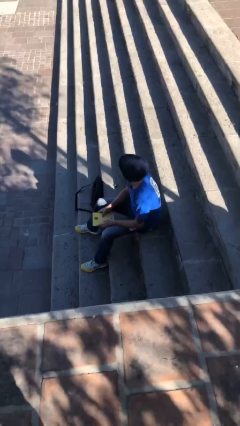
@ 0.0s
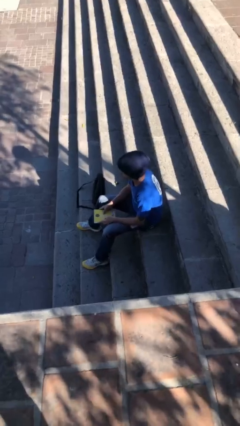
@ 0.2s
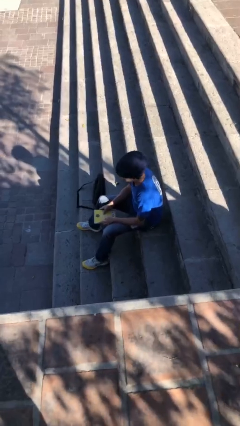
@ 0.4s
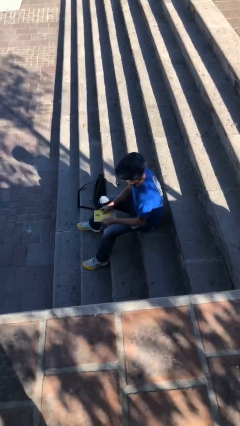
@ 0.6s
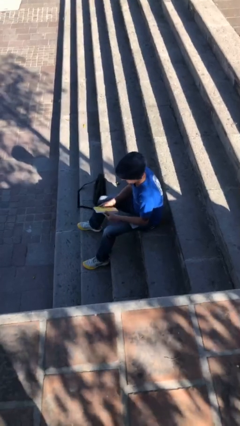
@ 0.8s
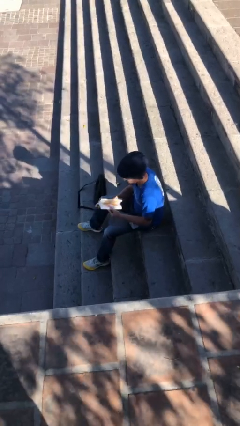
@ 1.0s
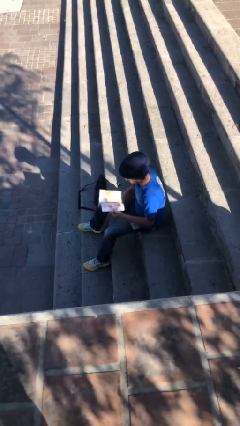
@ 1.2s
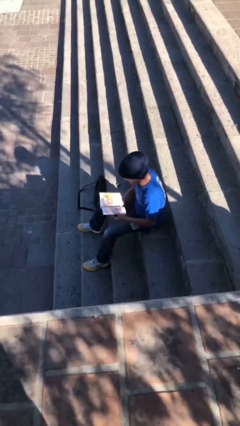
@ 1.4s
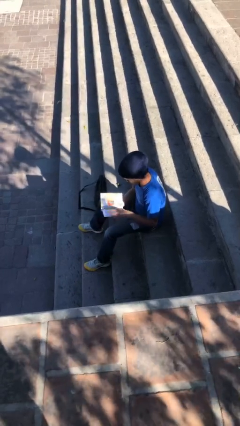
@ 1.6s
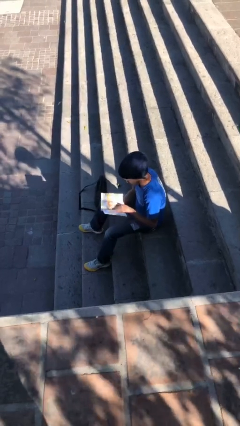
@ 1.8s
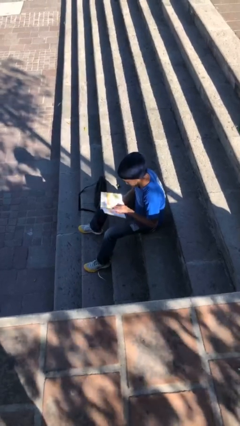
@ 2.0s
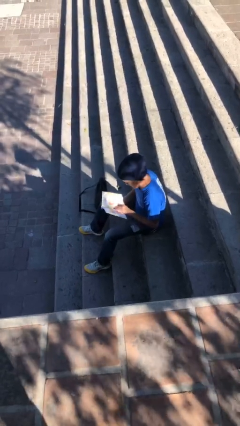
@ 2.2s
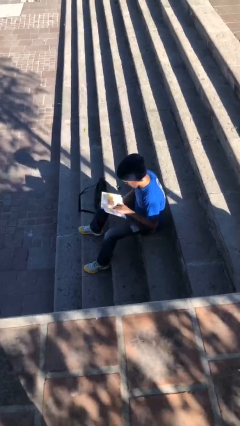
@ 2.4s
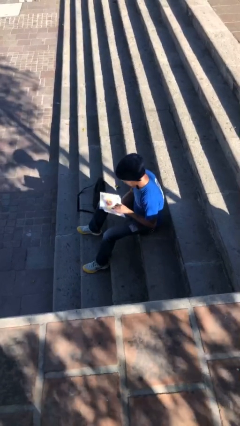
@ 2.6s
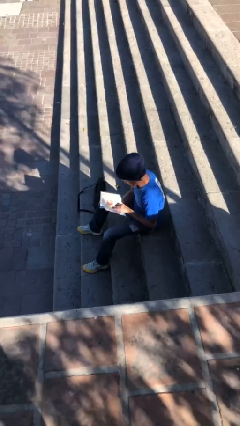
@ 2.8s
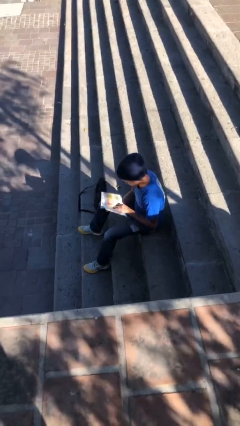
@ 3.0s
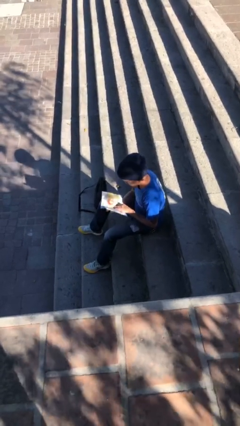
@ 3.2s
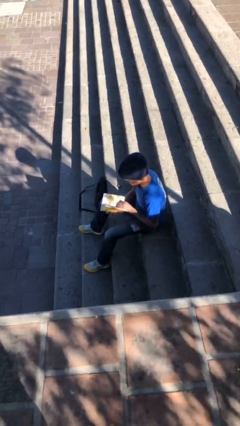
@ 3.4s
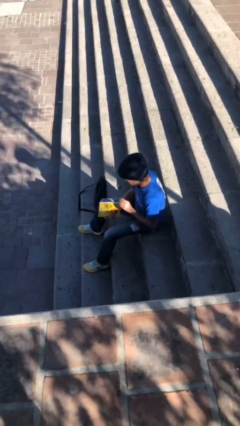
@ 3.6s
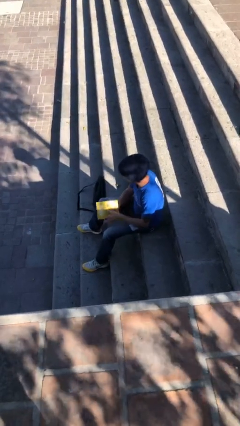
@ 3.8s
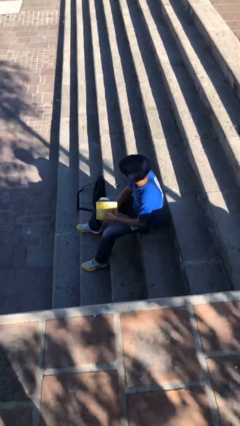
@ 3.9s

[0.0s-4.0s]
person reads document

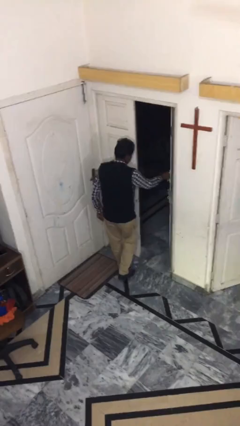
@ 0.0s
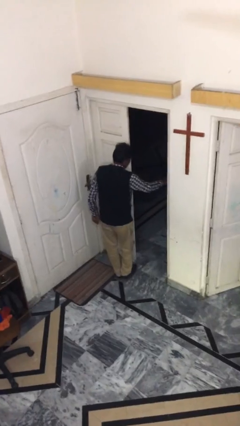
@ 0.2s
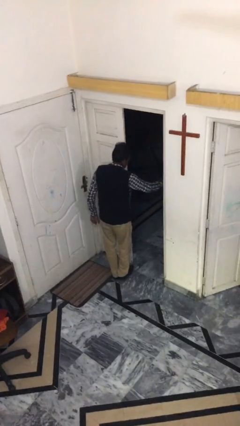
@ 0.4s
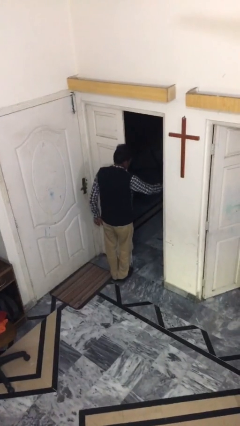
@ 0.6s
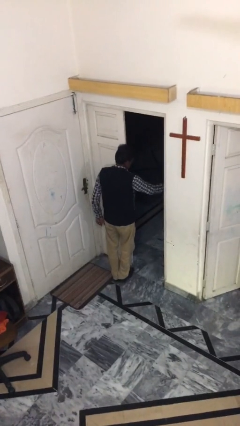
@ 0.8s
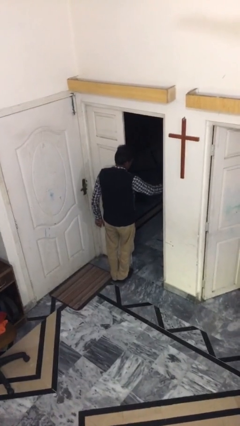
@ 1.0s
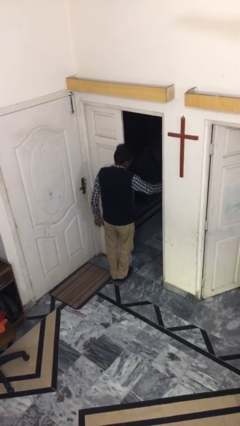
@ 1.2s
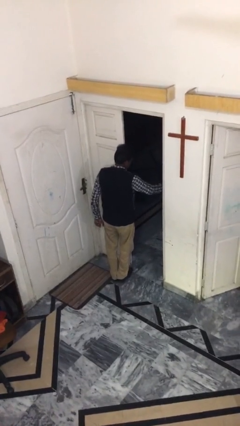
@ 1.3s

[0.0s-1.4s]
person opens facility door

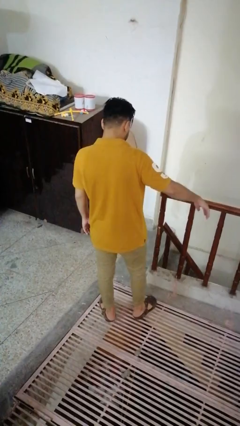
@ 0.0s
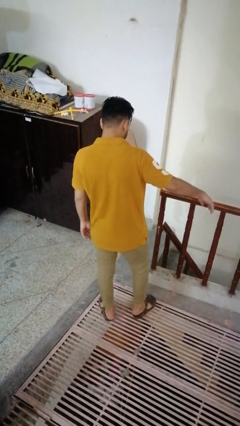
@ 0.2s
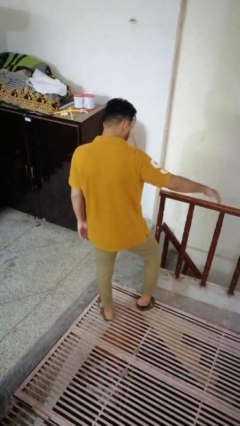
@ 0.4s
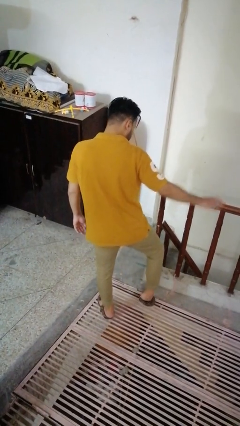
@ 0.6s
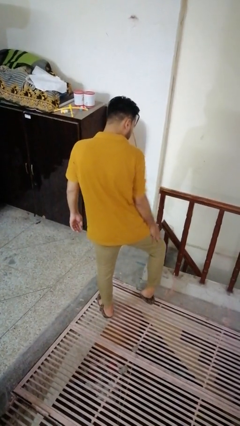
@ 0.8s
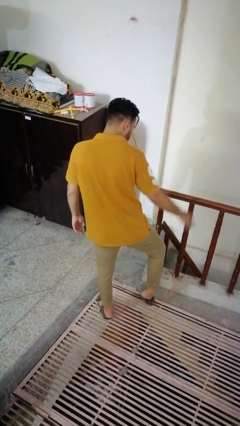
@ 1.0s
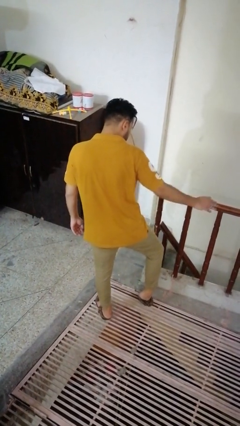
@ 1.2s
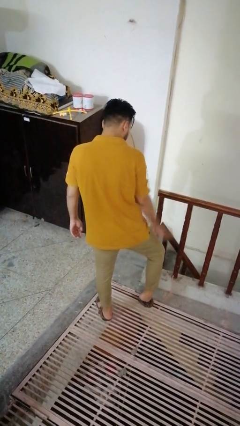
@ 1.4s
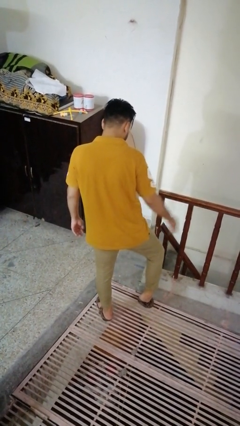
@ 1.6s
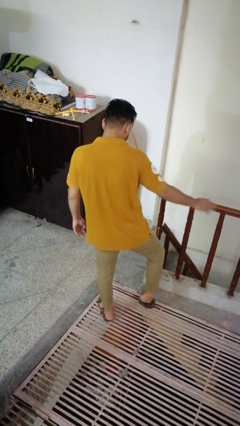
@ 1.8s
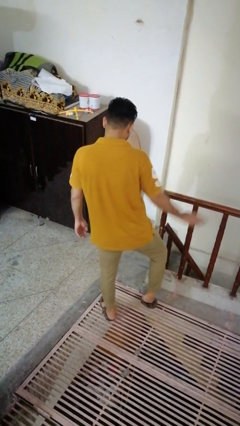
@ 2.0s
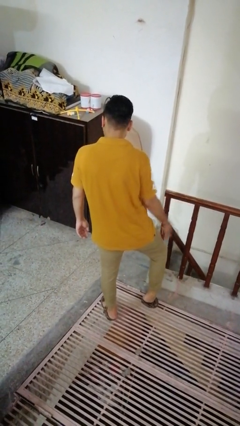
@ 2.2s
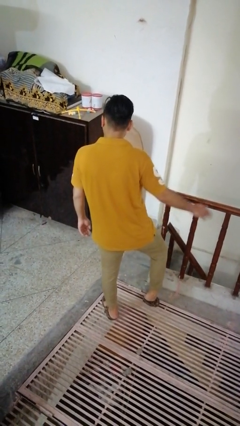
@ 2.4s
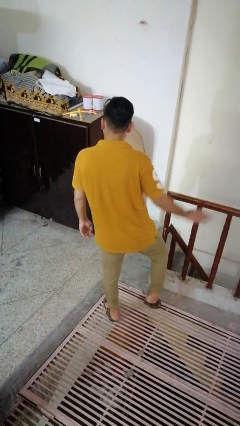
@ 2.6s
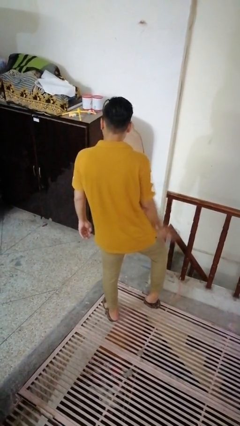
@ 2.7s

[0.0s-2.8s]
person slaps hands on thighs

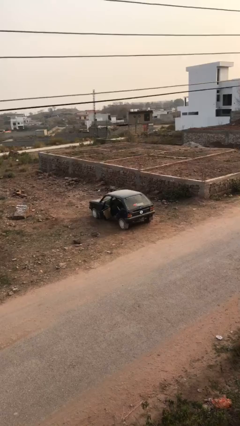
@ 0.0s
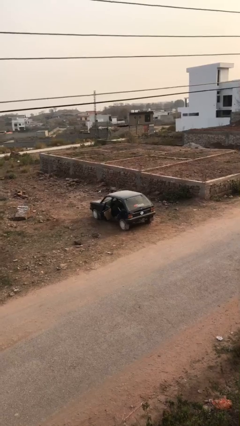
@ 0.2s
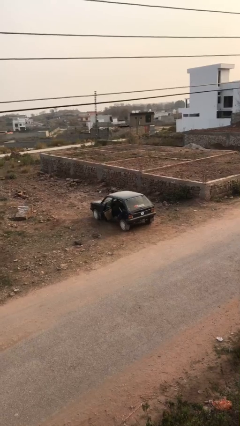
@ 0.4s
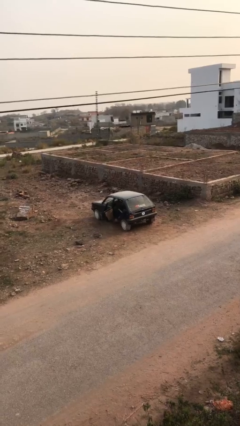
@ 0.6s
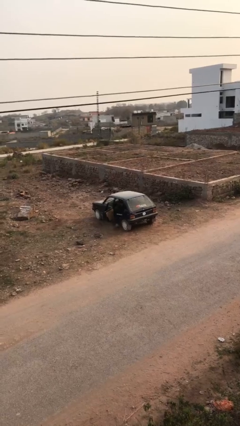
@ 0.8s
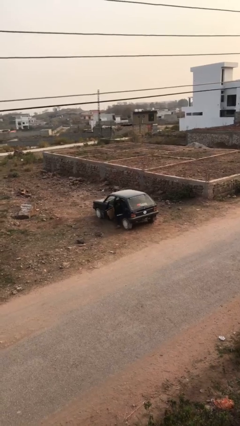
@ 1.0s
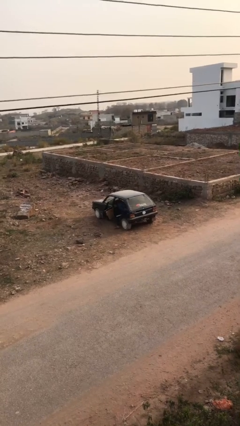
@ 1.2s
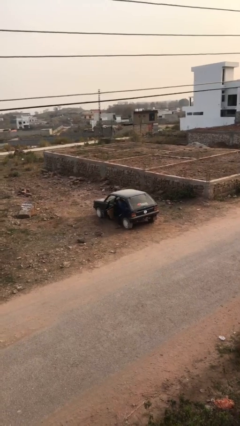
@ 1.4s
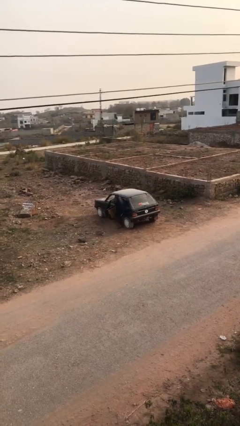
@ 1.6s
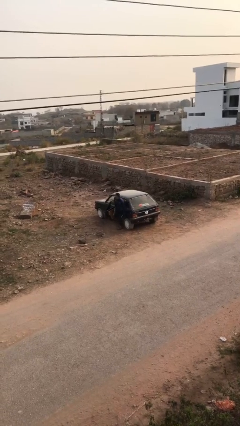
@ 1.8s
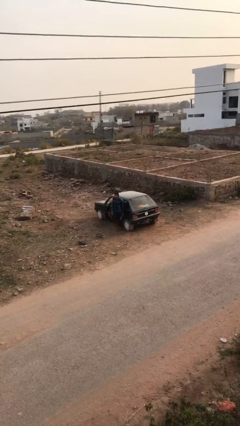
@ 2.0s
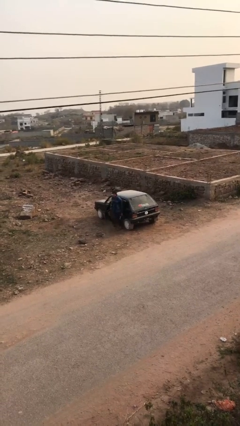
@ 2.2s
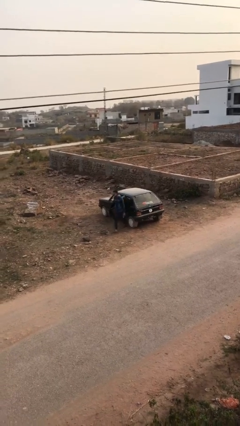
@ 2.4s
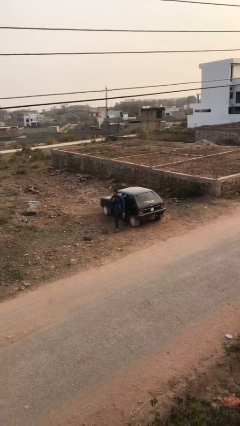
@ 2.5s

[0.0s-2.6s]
person exits car

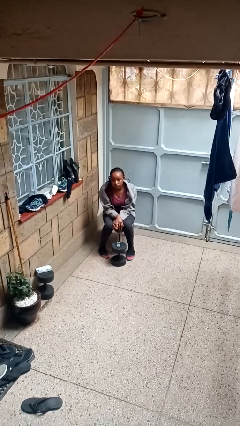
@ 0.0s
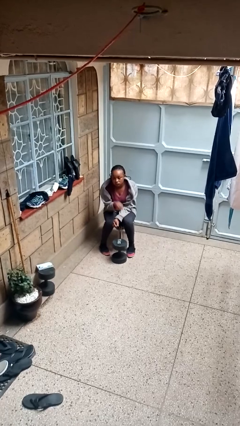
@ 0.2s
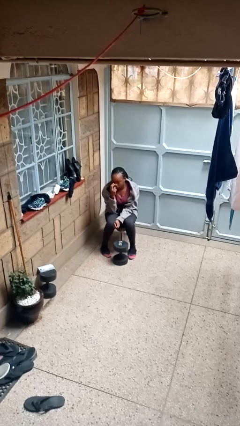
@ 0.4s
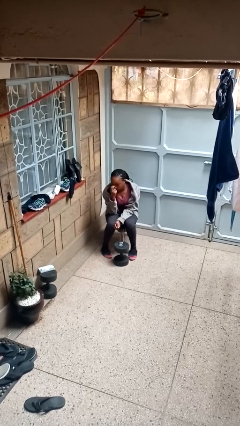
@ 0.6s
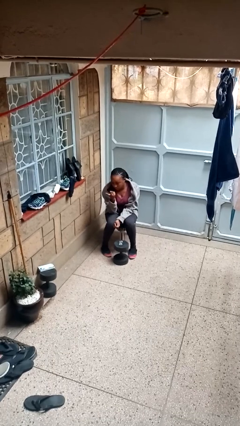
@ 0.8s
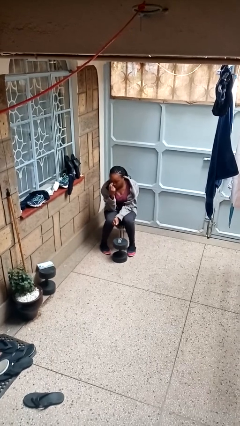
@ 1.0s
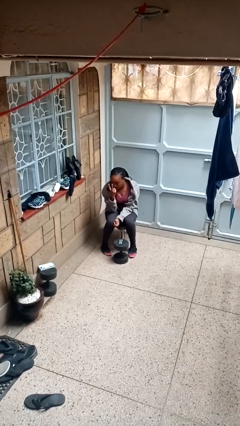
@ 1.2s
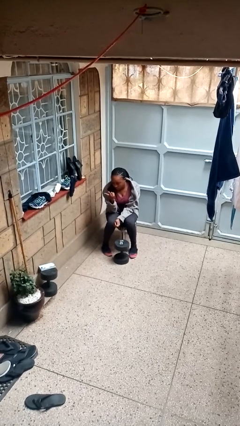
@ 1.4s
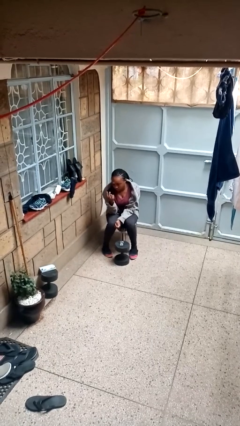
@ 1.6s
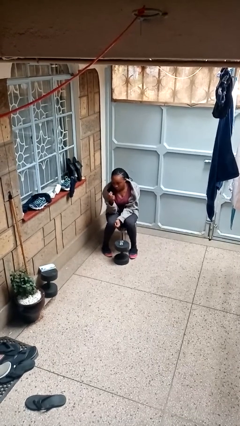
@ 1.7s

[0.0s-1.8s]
person gestures watch closely

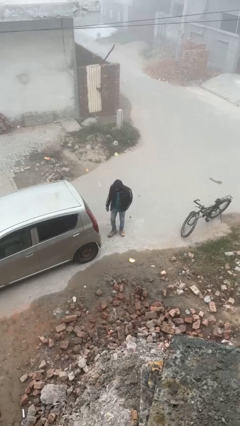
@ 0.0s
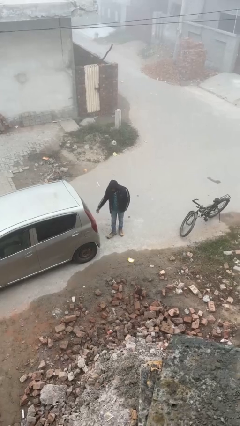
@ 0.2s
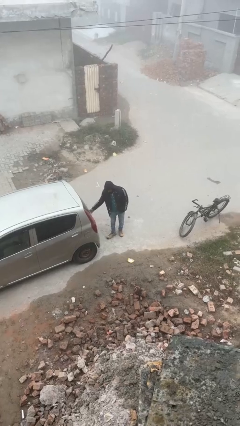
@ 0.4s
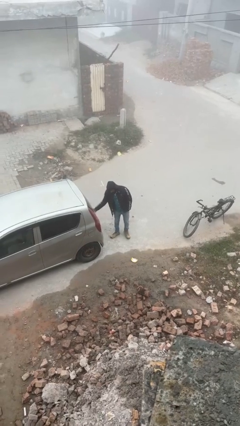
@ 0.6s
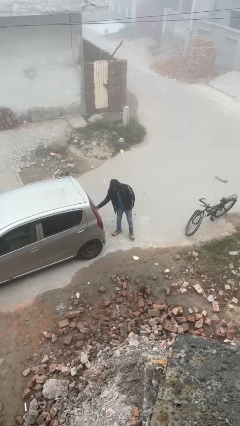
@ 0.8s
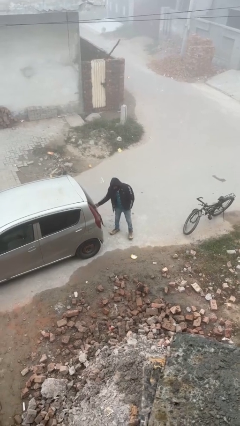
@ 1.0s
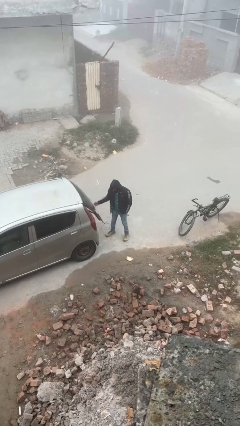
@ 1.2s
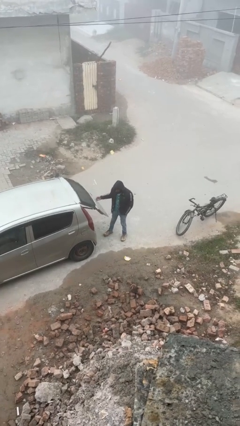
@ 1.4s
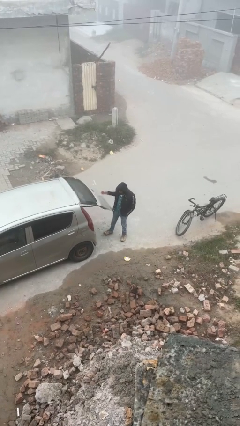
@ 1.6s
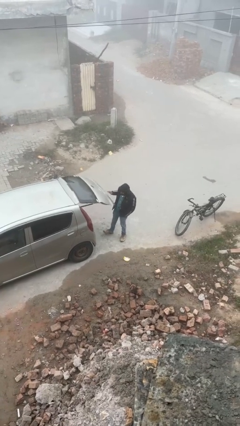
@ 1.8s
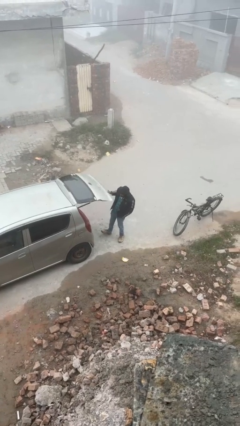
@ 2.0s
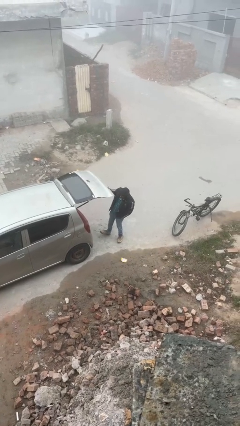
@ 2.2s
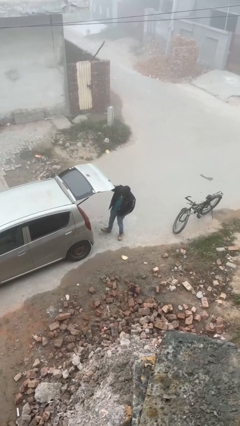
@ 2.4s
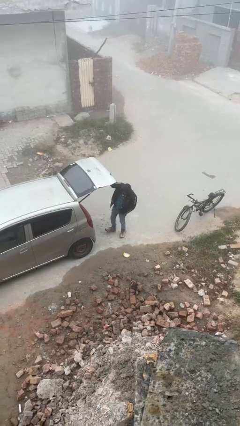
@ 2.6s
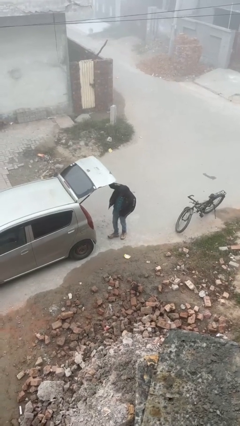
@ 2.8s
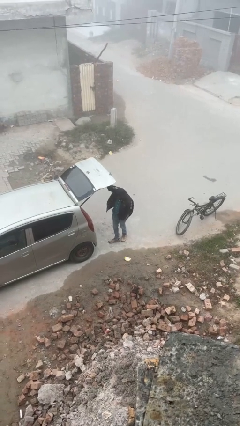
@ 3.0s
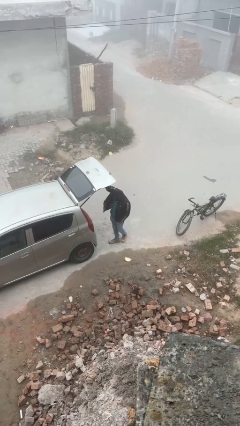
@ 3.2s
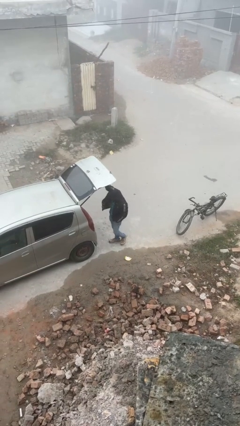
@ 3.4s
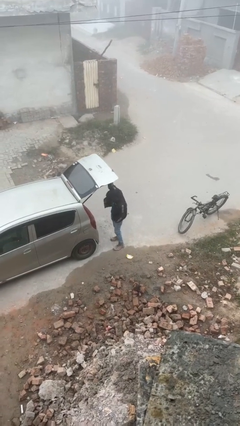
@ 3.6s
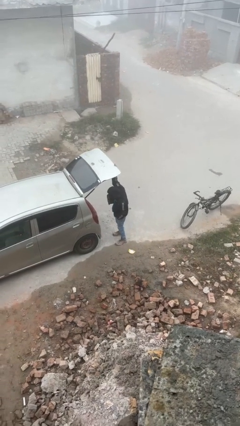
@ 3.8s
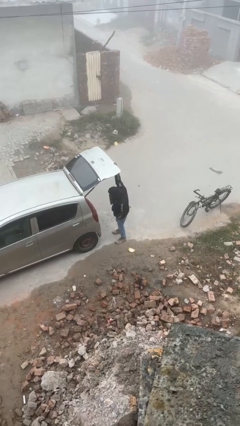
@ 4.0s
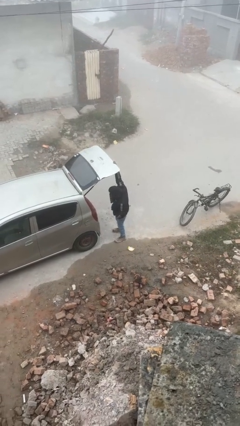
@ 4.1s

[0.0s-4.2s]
person opens car trunk

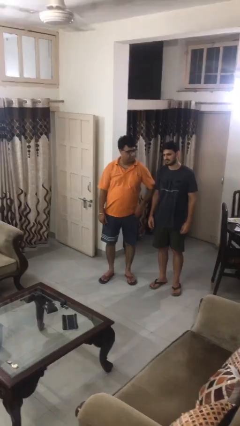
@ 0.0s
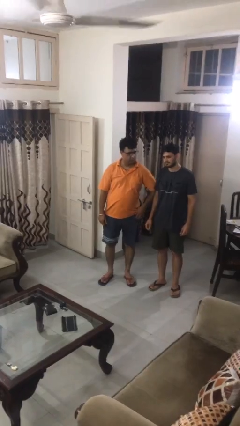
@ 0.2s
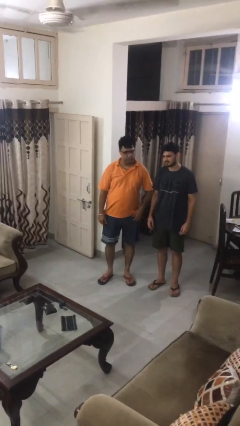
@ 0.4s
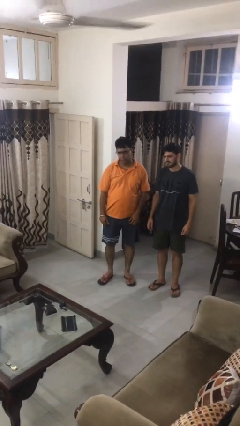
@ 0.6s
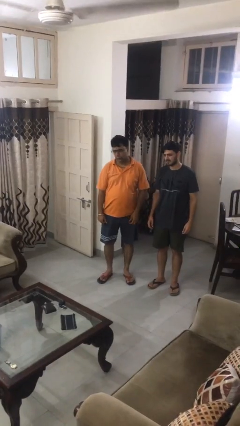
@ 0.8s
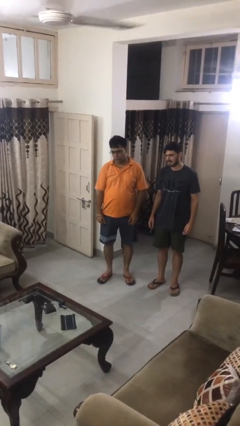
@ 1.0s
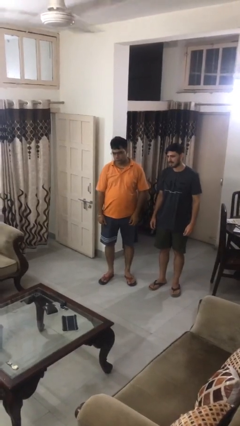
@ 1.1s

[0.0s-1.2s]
person nudges person with elbow
